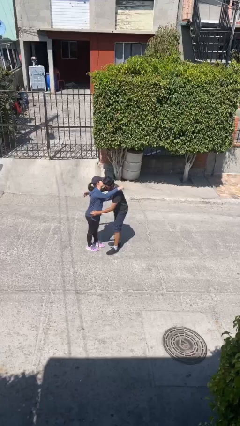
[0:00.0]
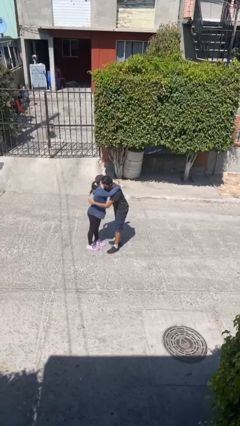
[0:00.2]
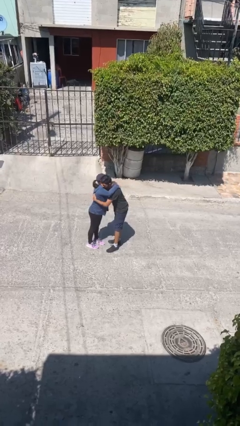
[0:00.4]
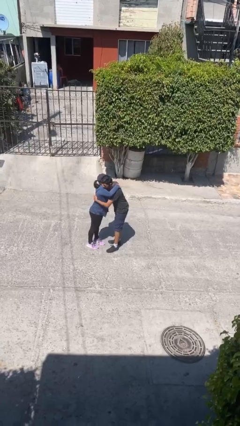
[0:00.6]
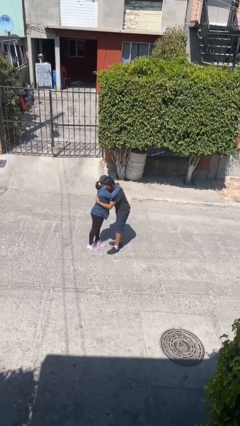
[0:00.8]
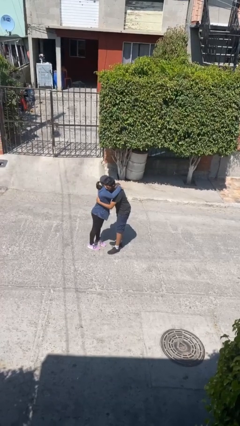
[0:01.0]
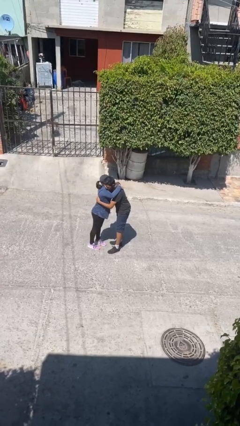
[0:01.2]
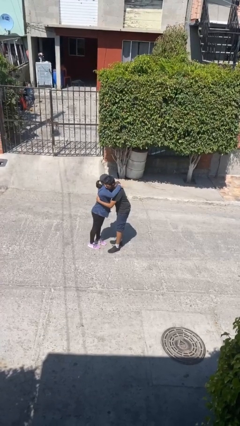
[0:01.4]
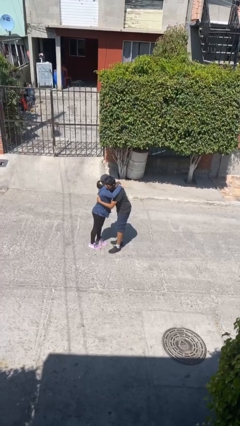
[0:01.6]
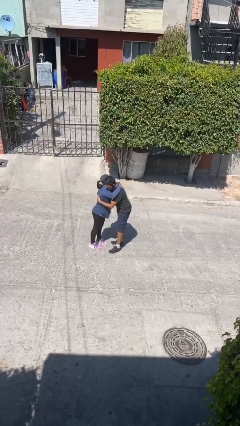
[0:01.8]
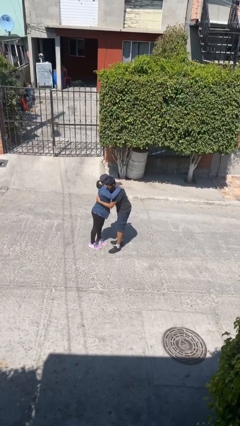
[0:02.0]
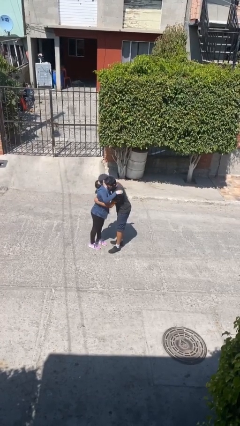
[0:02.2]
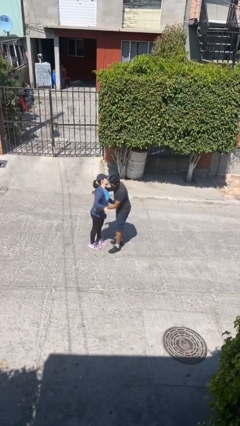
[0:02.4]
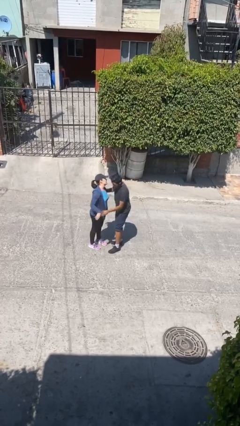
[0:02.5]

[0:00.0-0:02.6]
person embraces person

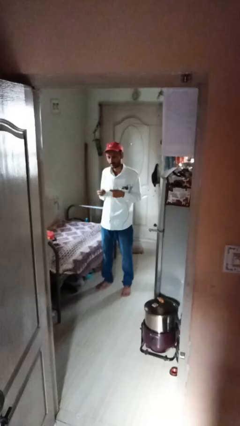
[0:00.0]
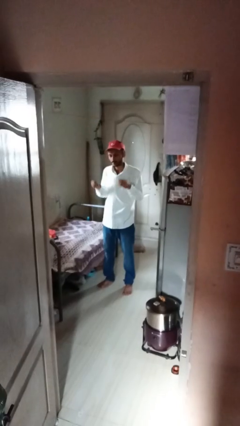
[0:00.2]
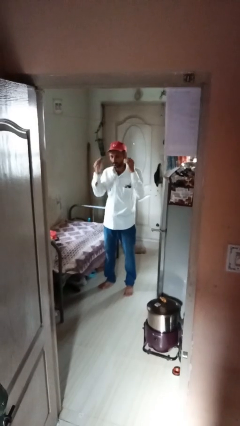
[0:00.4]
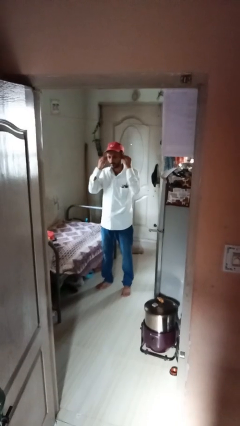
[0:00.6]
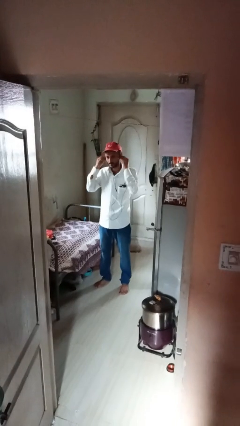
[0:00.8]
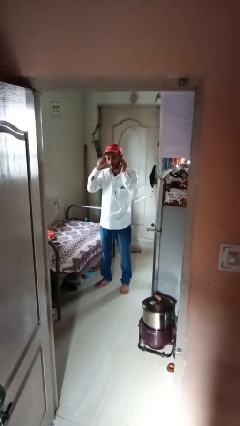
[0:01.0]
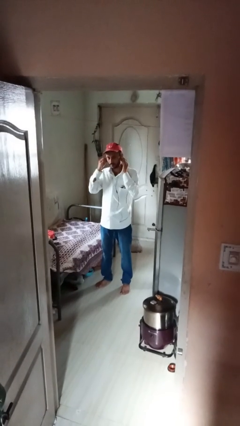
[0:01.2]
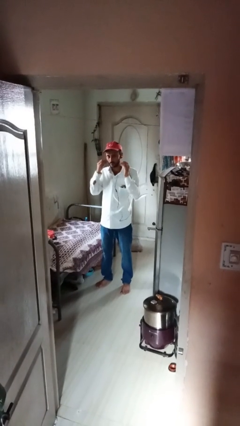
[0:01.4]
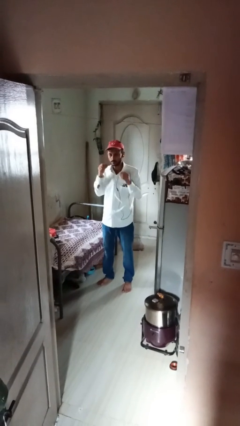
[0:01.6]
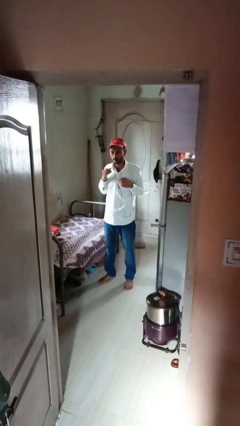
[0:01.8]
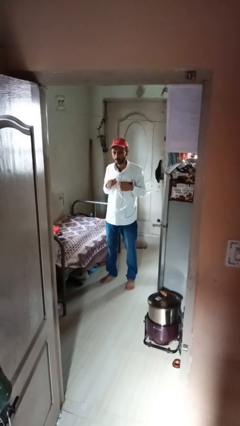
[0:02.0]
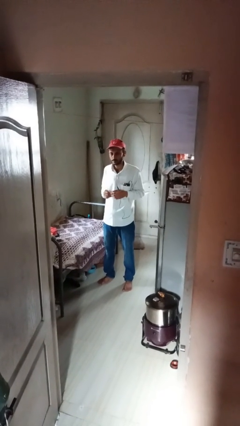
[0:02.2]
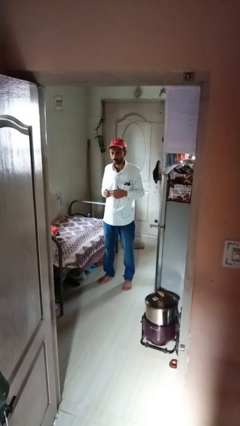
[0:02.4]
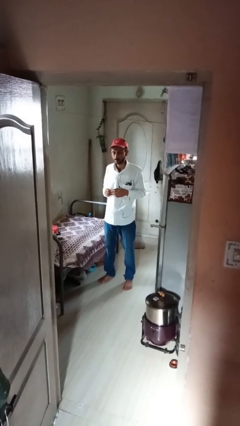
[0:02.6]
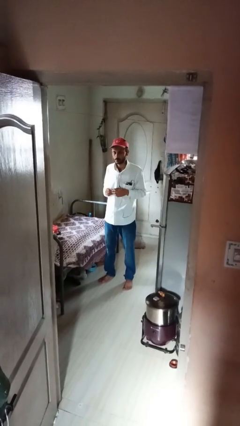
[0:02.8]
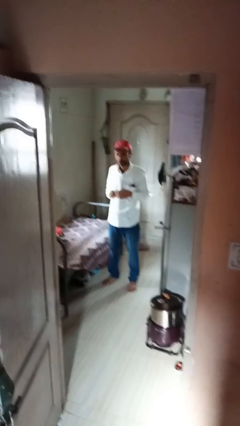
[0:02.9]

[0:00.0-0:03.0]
person puts on headphones

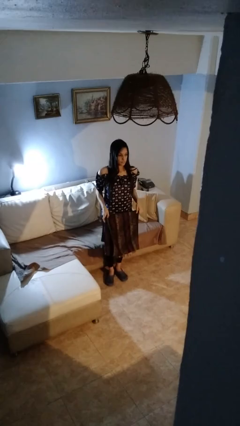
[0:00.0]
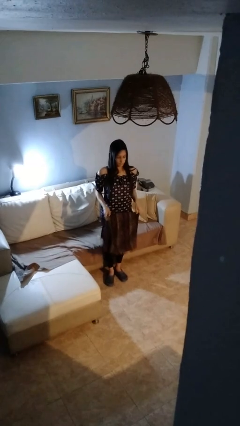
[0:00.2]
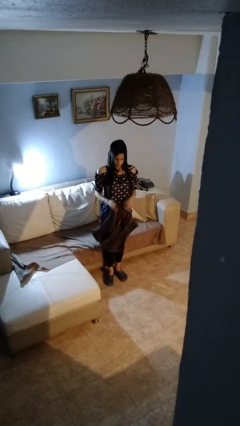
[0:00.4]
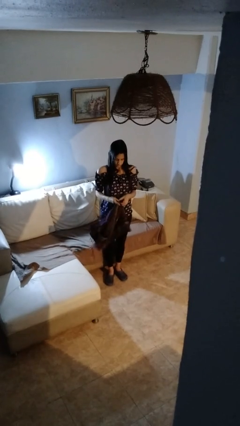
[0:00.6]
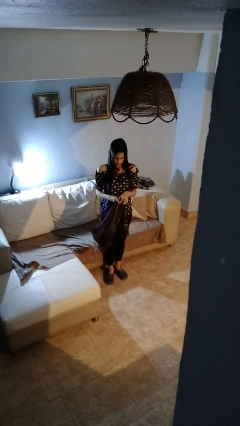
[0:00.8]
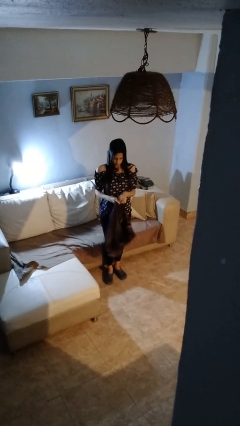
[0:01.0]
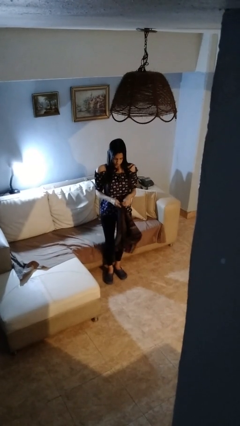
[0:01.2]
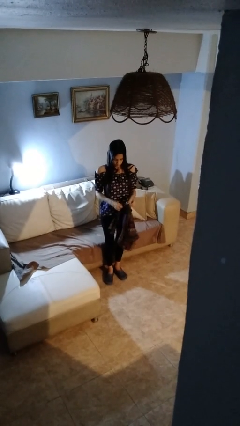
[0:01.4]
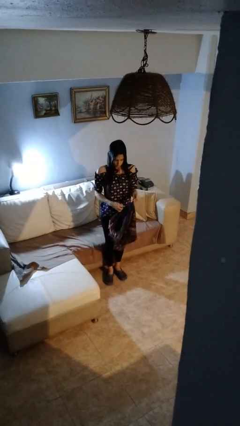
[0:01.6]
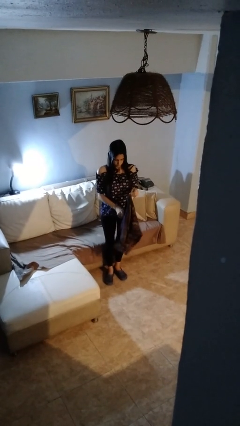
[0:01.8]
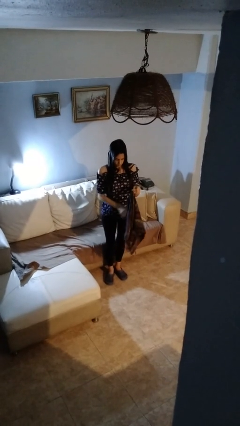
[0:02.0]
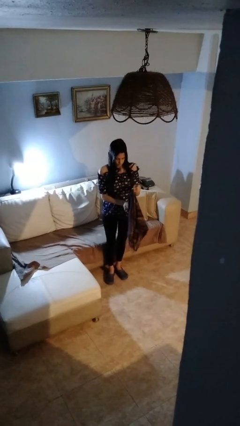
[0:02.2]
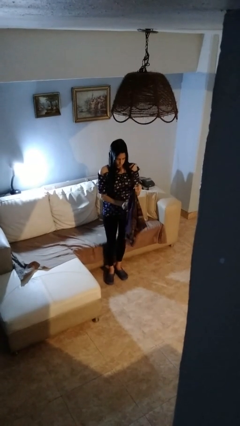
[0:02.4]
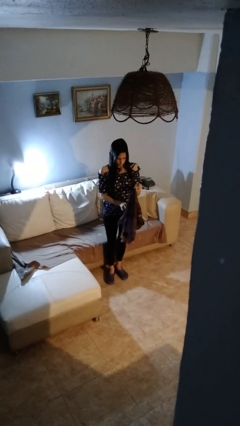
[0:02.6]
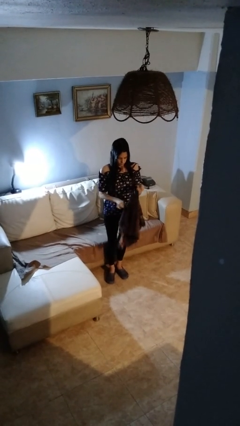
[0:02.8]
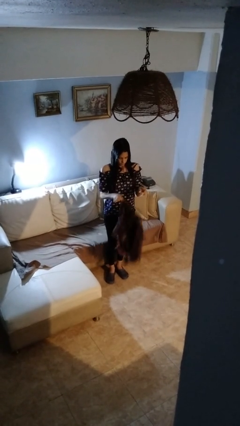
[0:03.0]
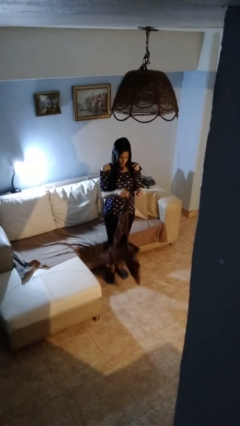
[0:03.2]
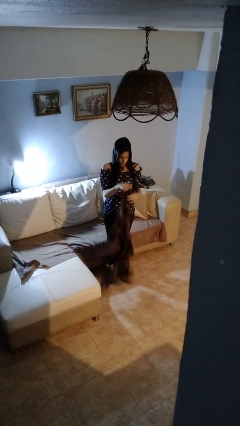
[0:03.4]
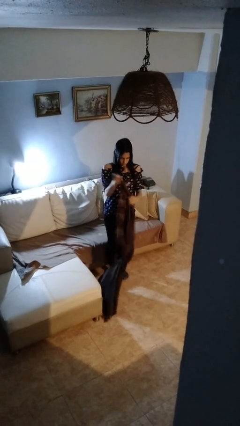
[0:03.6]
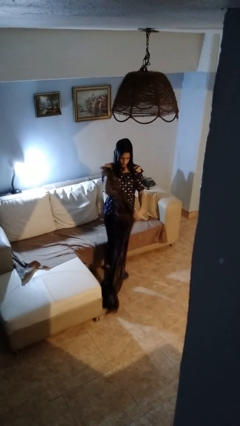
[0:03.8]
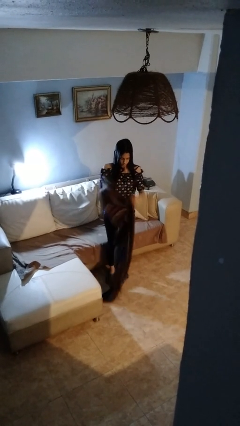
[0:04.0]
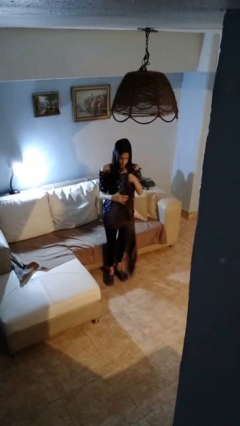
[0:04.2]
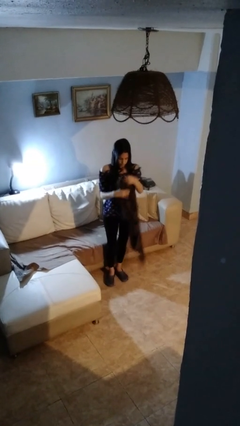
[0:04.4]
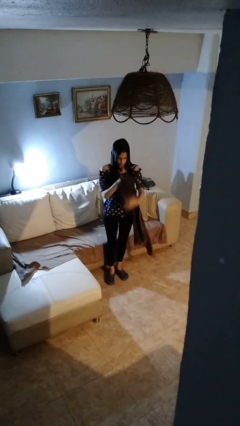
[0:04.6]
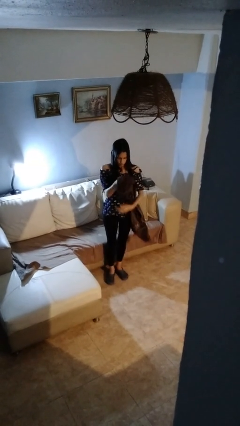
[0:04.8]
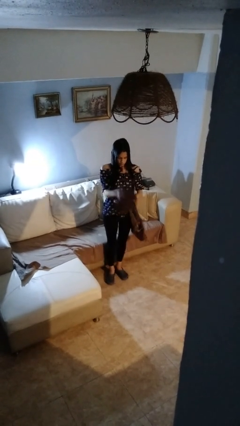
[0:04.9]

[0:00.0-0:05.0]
person unfolds blanket

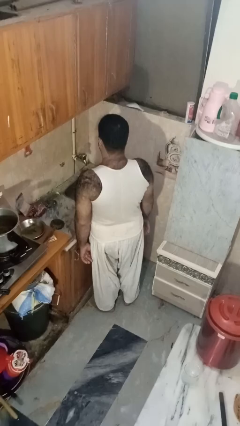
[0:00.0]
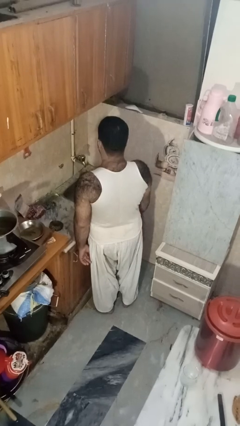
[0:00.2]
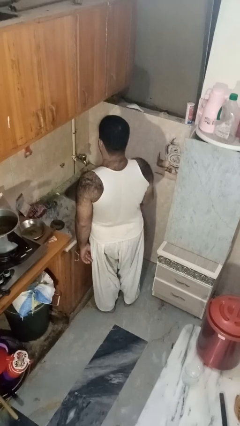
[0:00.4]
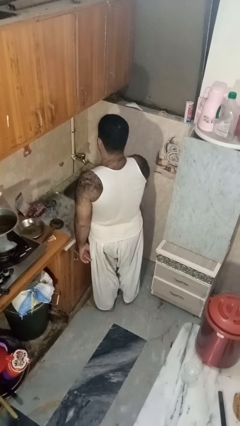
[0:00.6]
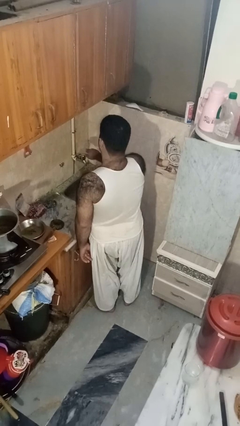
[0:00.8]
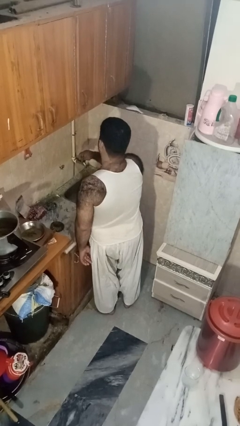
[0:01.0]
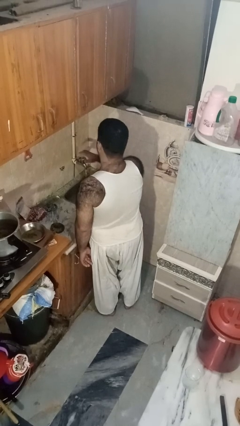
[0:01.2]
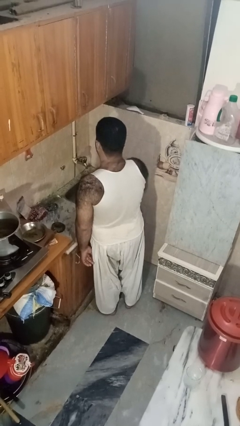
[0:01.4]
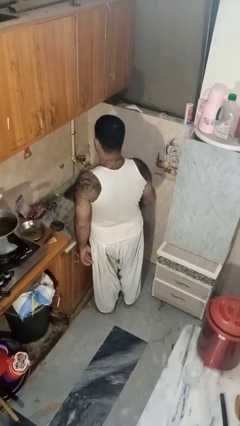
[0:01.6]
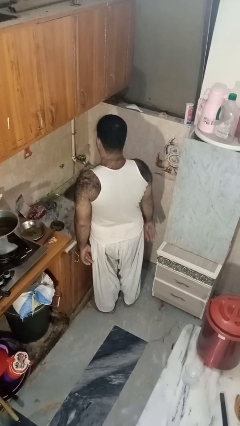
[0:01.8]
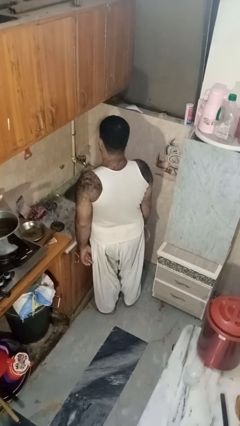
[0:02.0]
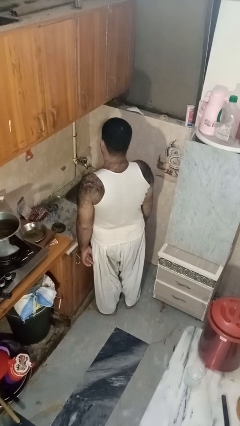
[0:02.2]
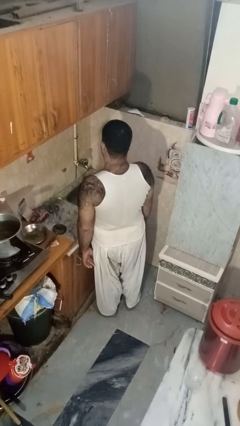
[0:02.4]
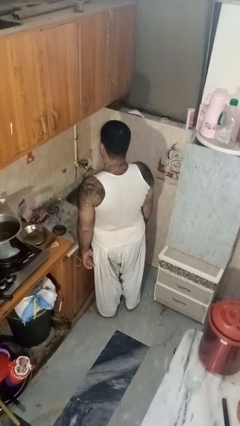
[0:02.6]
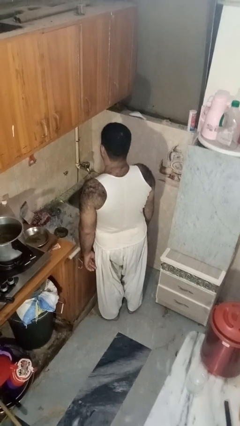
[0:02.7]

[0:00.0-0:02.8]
person turns on faucet

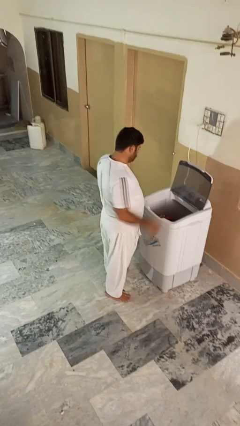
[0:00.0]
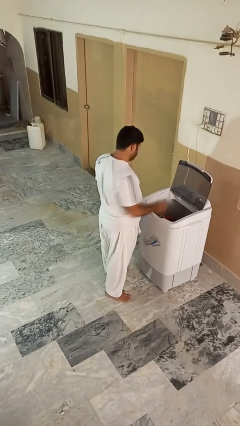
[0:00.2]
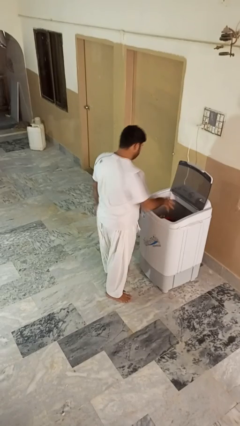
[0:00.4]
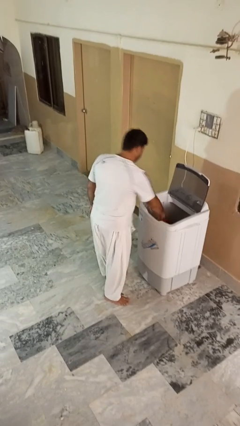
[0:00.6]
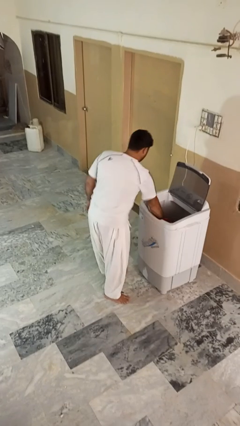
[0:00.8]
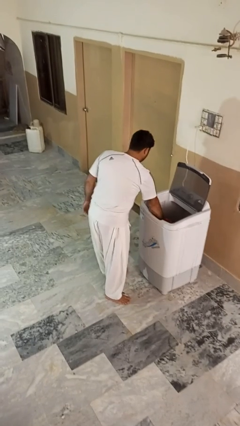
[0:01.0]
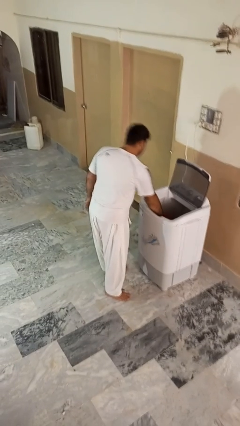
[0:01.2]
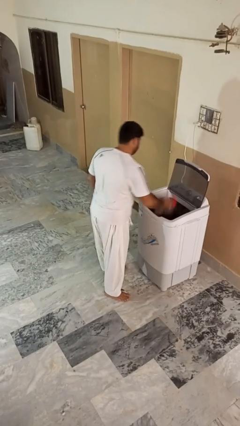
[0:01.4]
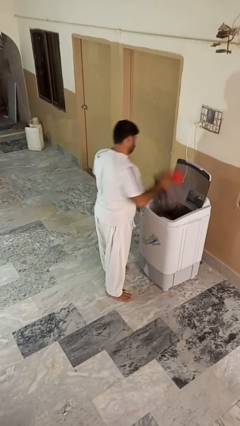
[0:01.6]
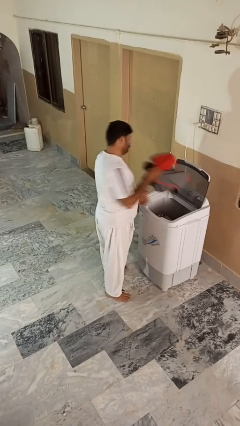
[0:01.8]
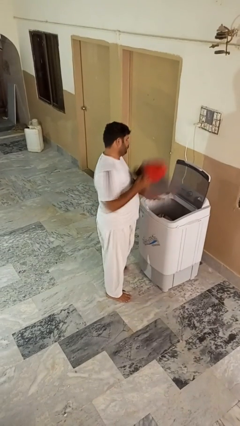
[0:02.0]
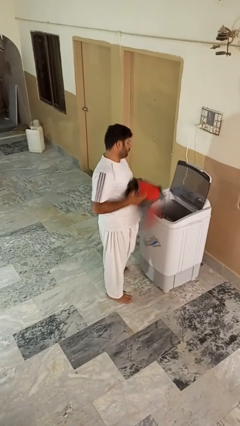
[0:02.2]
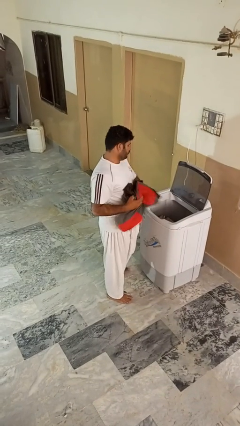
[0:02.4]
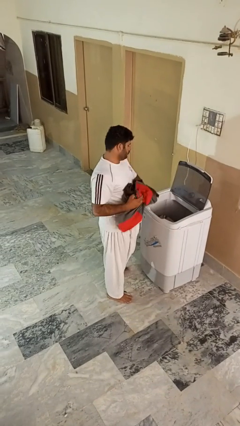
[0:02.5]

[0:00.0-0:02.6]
person unloads clotheswasher

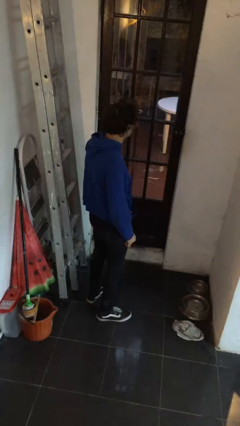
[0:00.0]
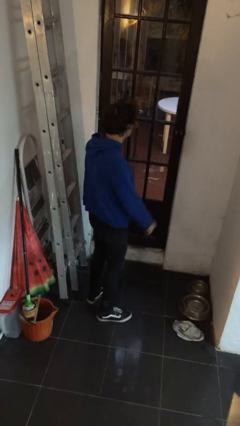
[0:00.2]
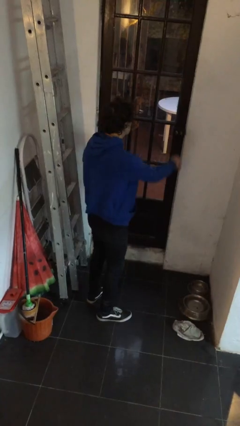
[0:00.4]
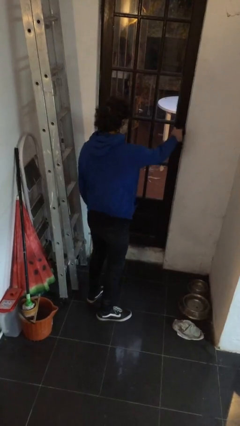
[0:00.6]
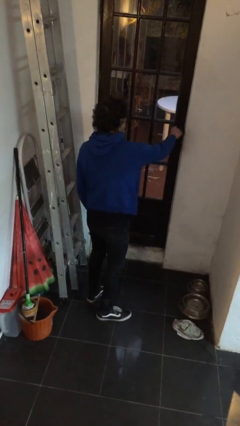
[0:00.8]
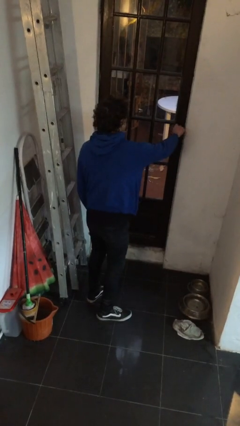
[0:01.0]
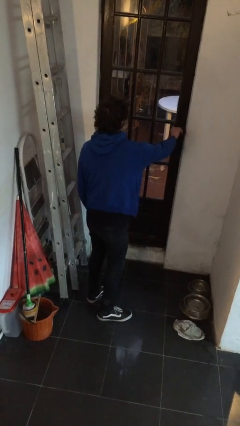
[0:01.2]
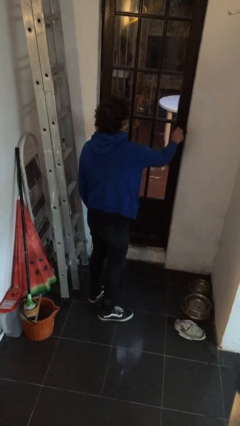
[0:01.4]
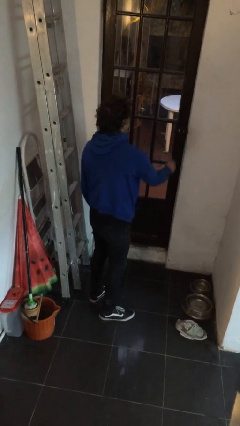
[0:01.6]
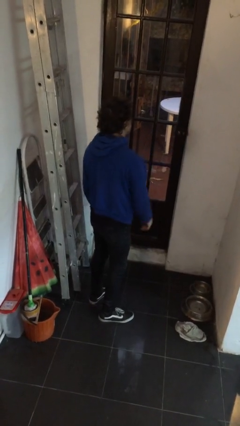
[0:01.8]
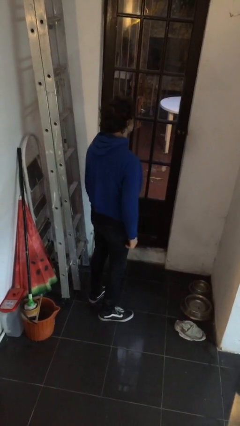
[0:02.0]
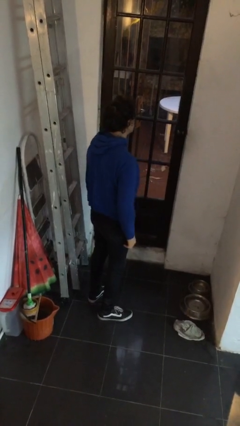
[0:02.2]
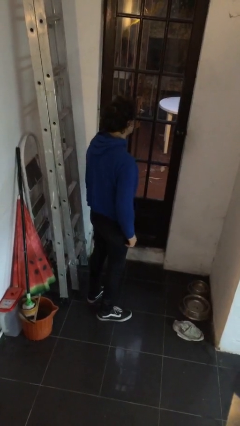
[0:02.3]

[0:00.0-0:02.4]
person unlocks door with keys
